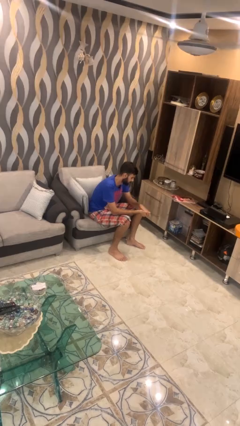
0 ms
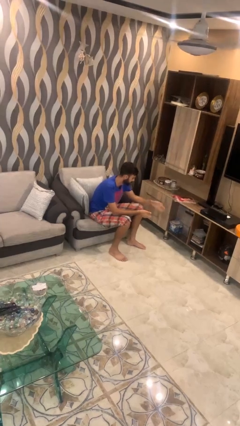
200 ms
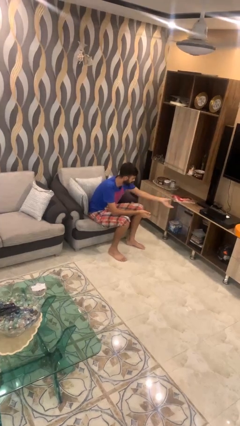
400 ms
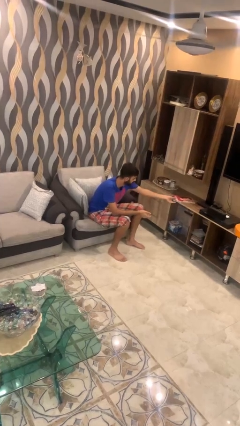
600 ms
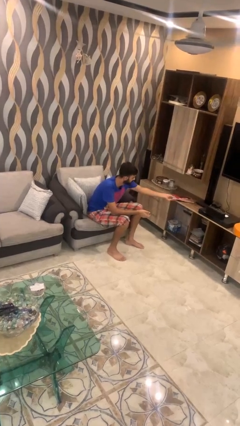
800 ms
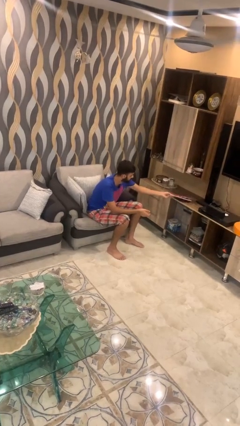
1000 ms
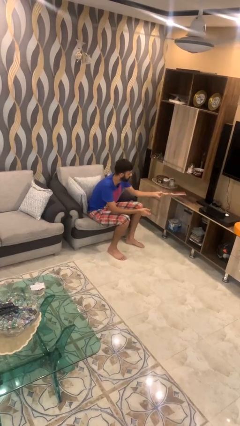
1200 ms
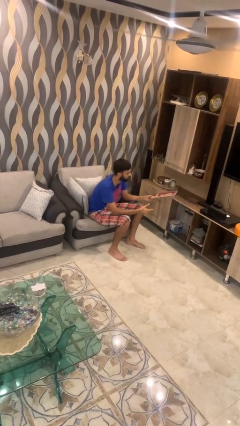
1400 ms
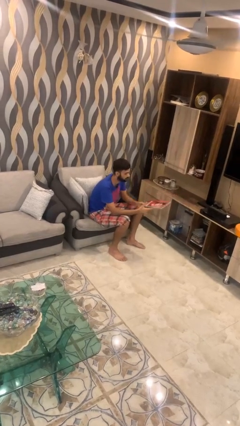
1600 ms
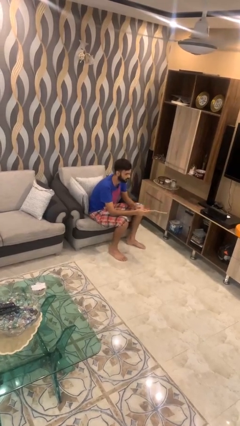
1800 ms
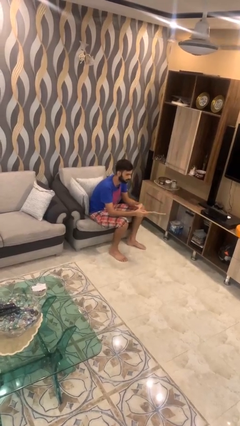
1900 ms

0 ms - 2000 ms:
person picks up object from table

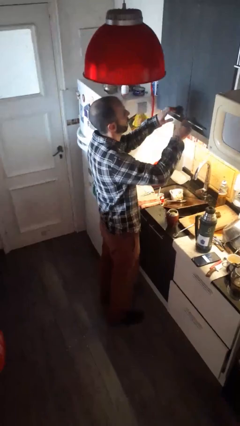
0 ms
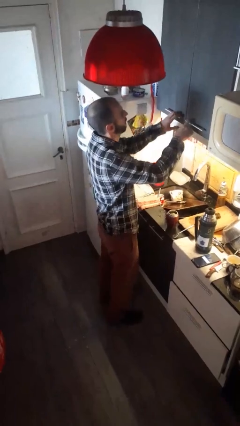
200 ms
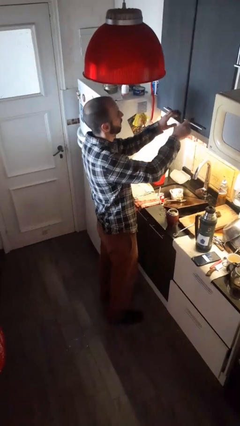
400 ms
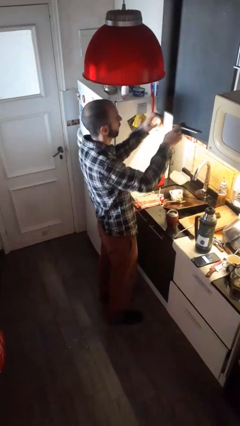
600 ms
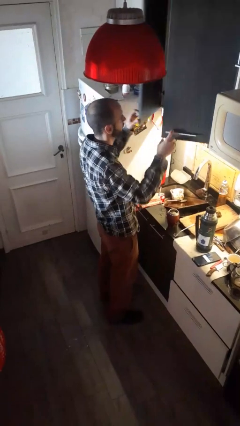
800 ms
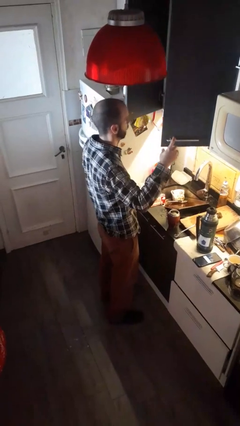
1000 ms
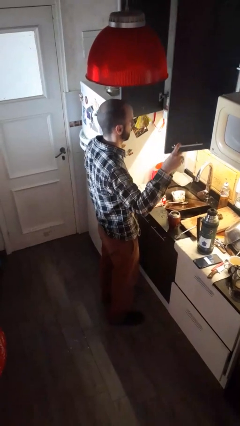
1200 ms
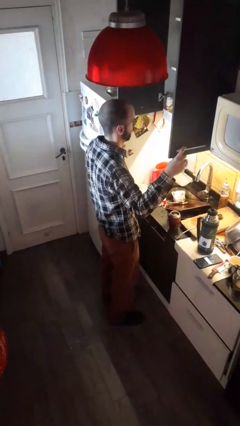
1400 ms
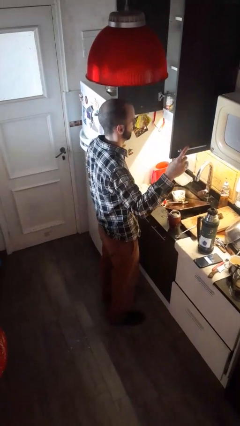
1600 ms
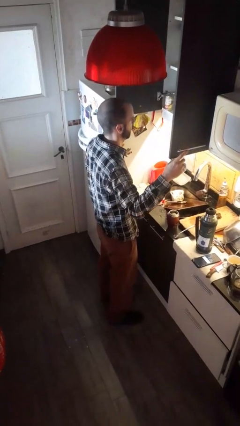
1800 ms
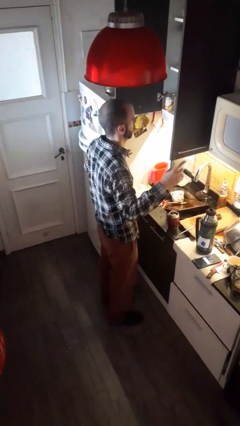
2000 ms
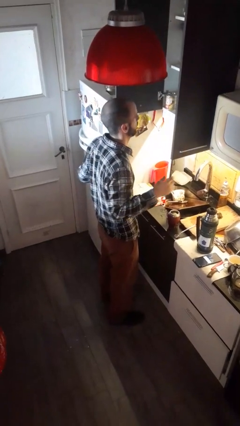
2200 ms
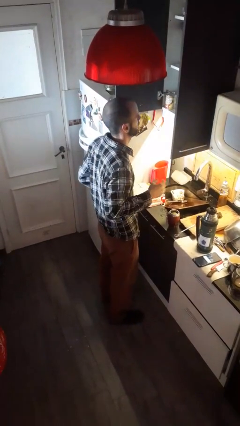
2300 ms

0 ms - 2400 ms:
person opens kitchen drawer

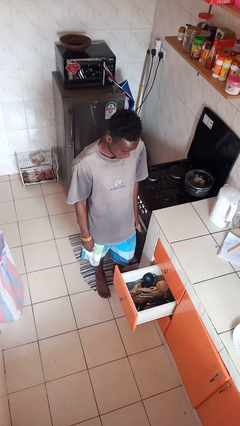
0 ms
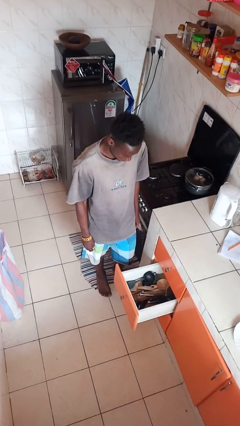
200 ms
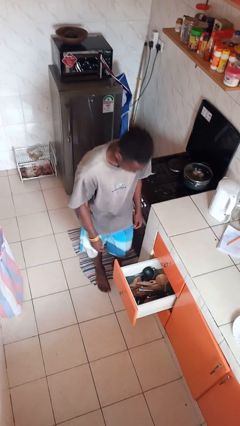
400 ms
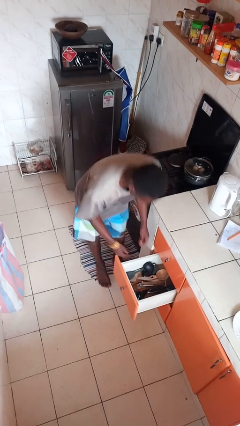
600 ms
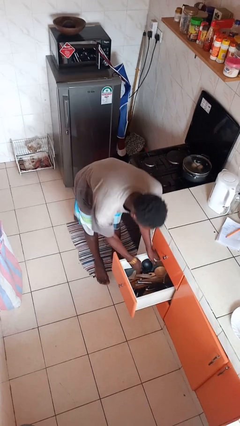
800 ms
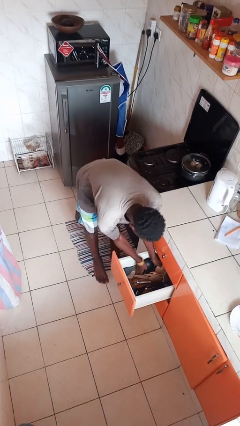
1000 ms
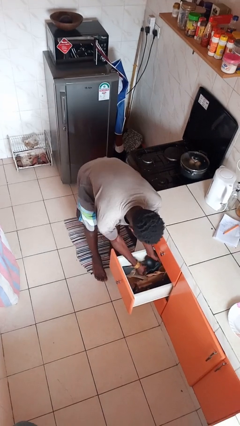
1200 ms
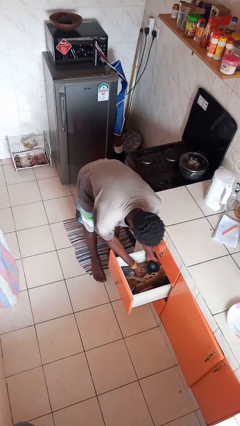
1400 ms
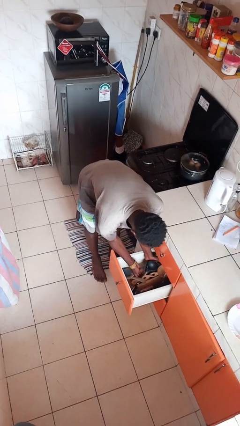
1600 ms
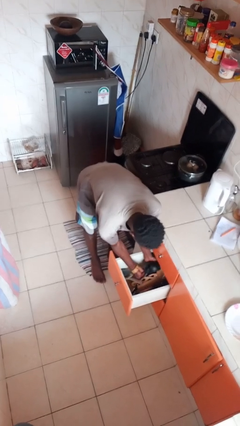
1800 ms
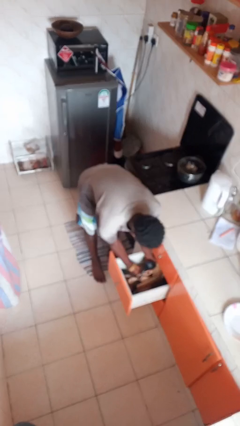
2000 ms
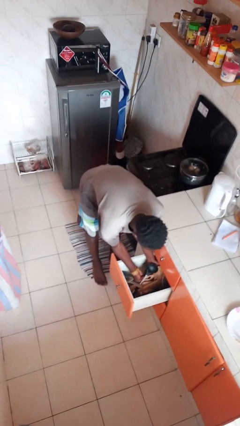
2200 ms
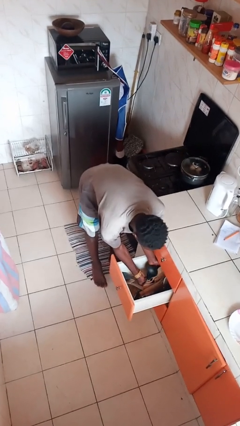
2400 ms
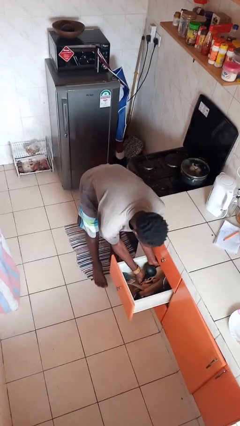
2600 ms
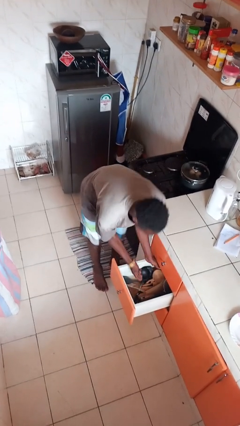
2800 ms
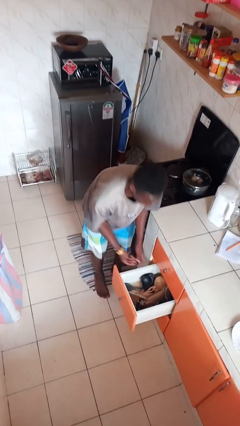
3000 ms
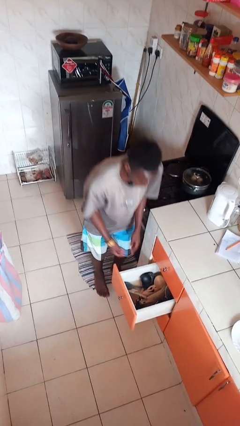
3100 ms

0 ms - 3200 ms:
person searches in kitchen drawer

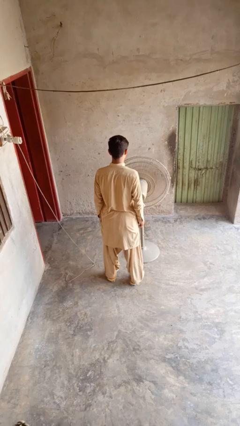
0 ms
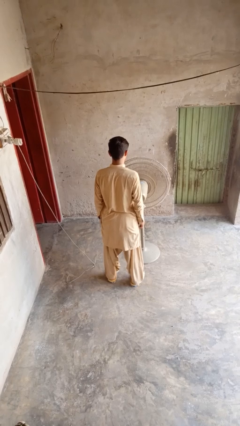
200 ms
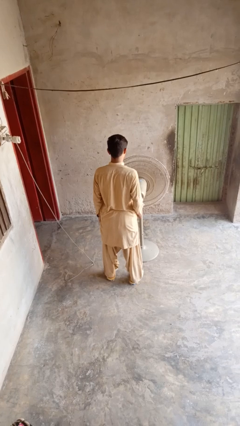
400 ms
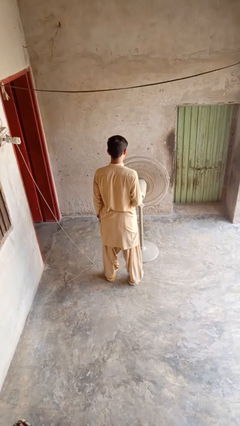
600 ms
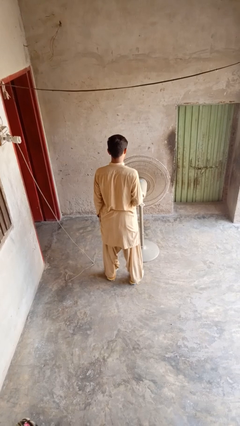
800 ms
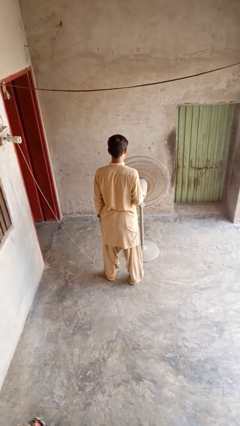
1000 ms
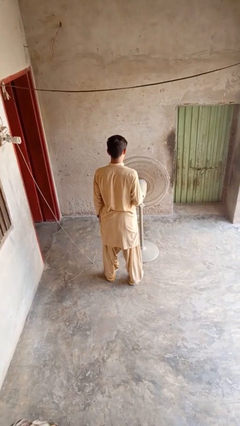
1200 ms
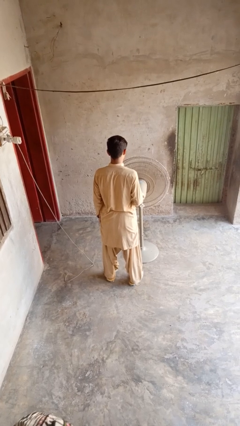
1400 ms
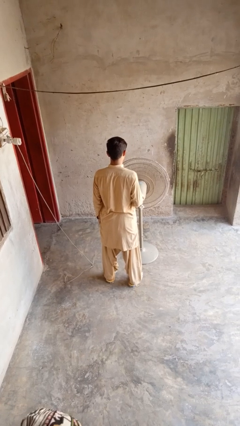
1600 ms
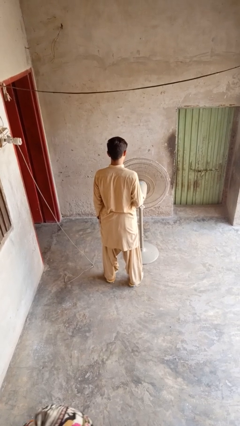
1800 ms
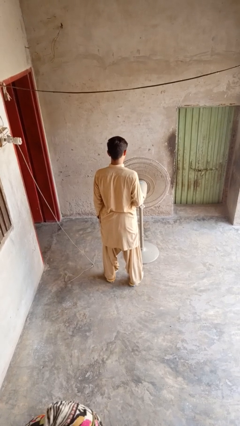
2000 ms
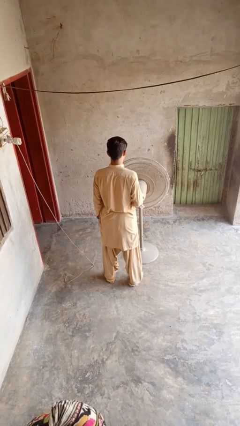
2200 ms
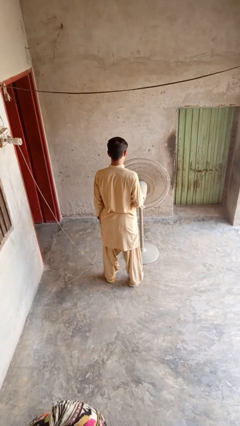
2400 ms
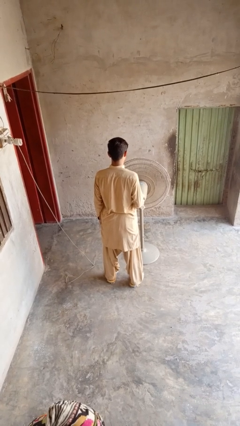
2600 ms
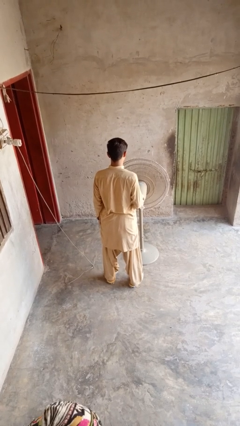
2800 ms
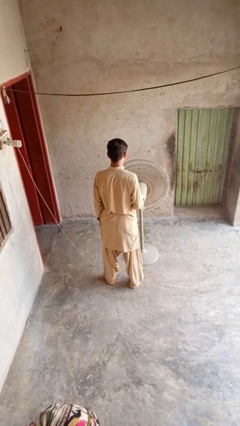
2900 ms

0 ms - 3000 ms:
person turns on fan

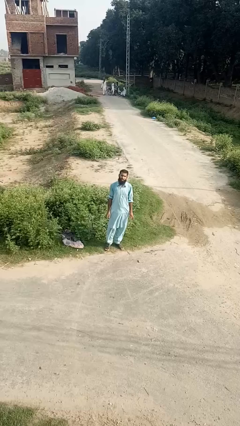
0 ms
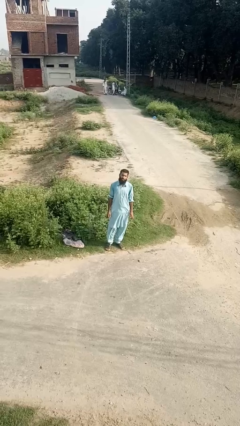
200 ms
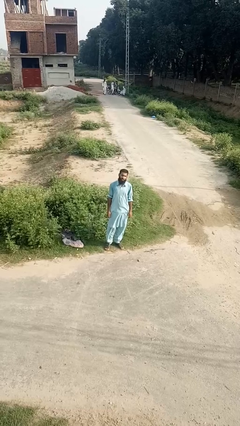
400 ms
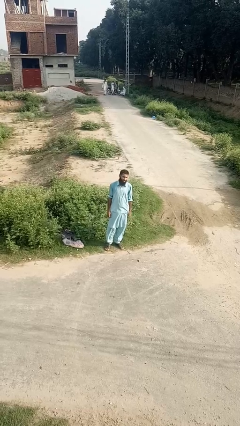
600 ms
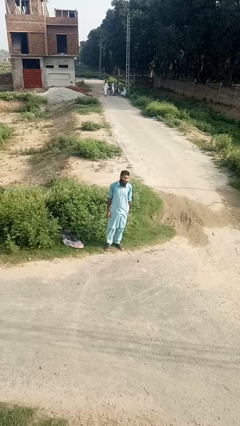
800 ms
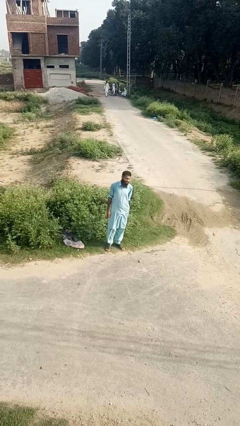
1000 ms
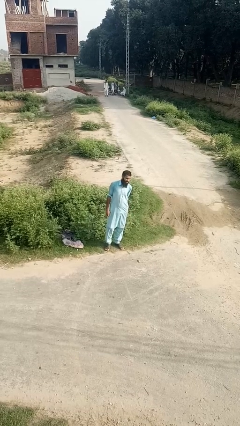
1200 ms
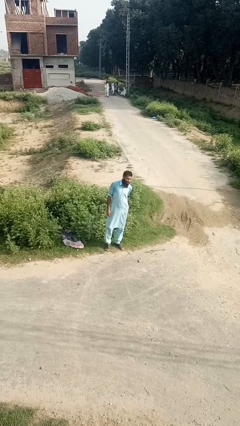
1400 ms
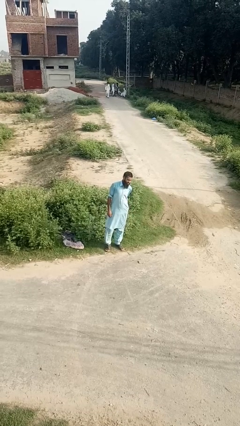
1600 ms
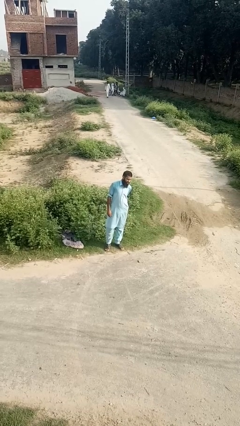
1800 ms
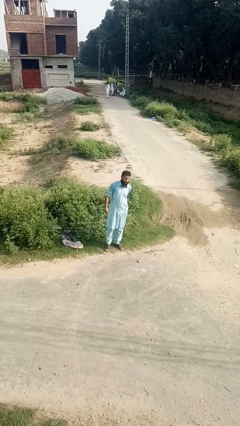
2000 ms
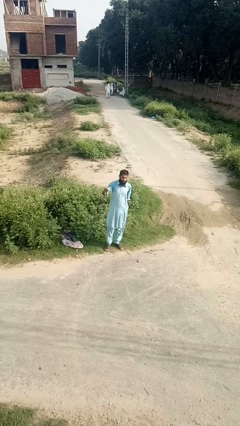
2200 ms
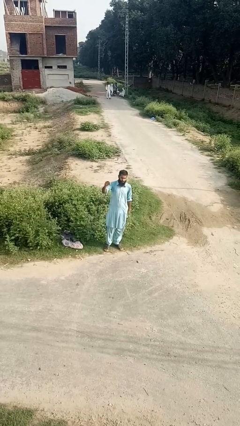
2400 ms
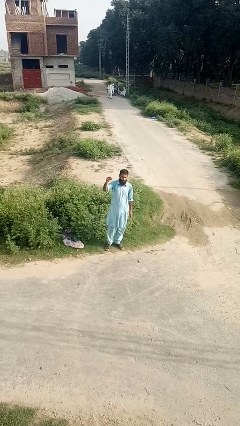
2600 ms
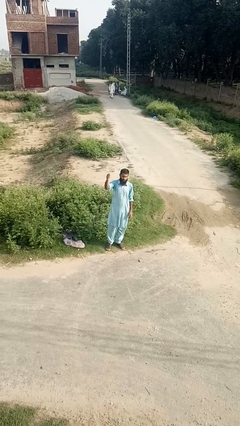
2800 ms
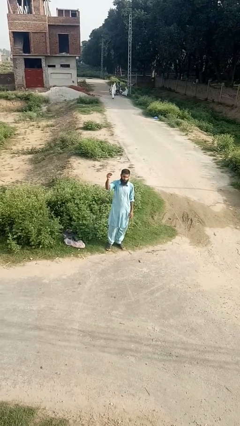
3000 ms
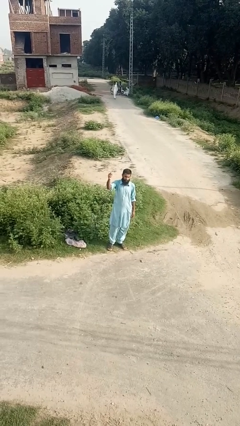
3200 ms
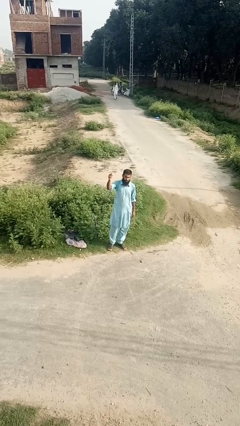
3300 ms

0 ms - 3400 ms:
person snaps fingers

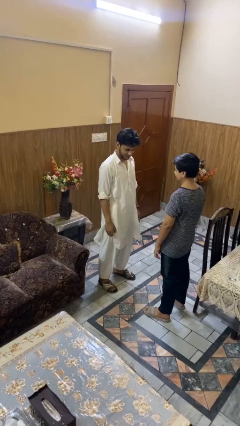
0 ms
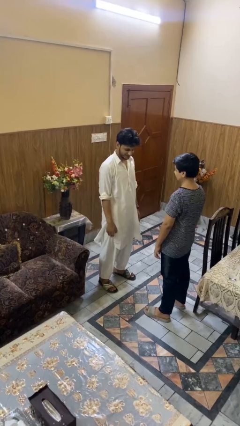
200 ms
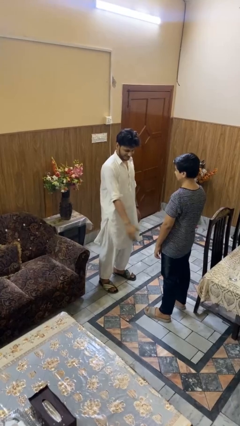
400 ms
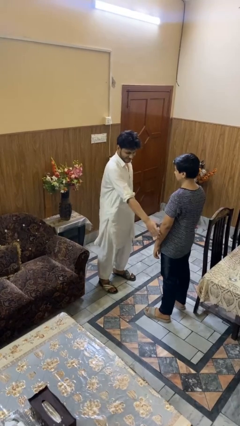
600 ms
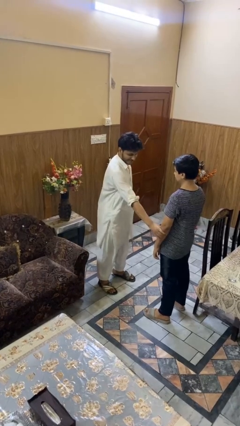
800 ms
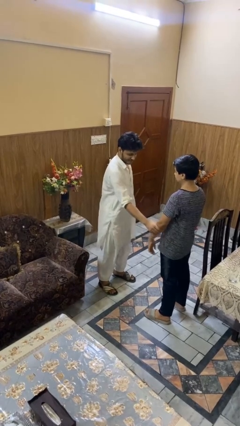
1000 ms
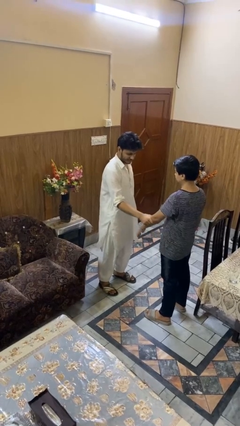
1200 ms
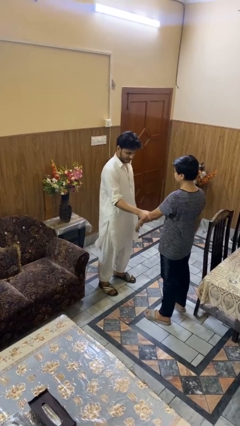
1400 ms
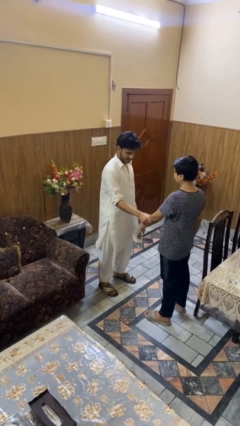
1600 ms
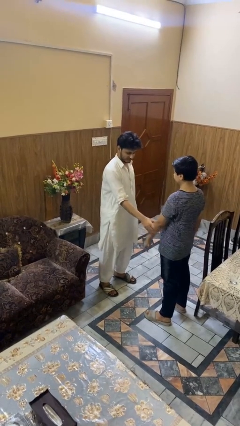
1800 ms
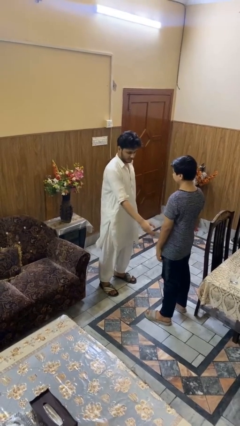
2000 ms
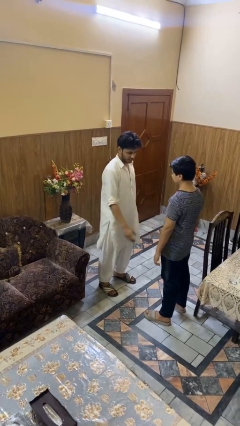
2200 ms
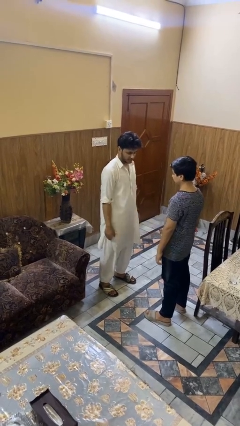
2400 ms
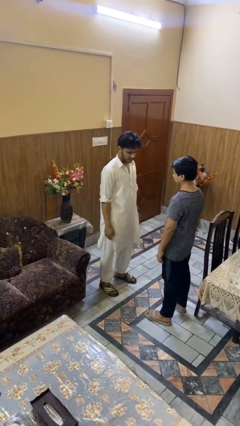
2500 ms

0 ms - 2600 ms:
person grabs person by forearm

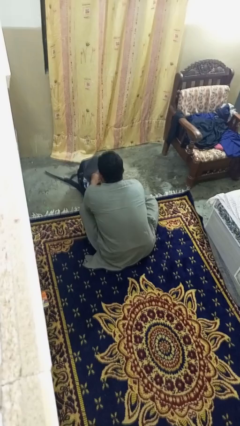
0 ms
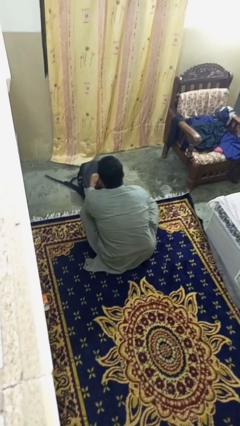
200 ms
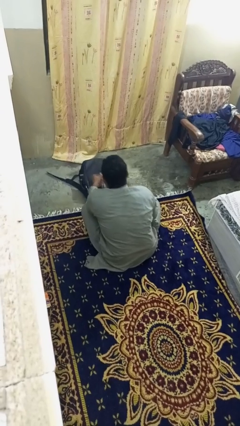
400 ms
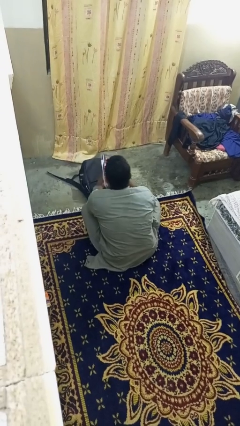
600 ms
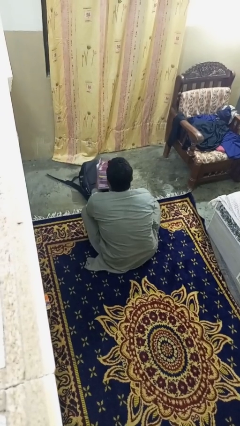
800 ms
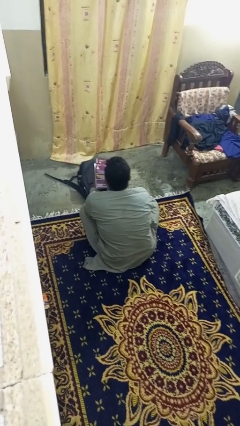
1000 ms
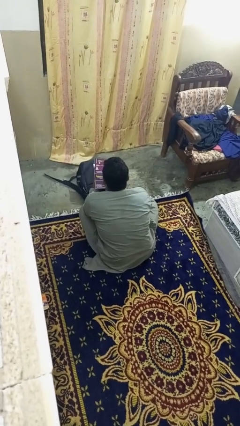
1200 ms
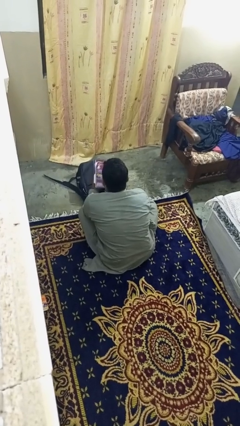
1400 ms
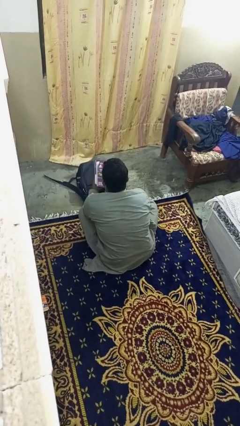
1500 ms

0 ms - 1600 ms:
person takes object from bag
